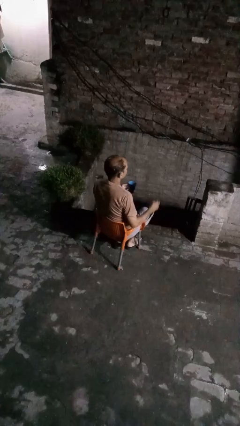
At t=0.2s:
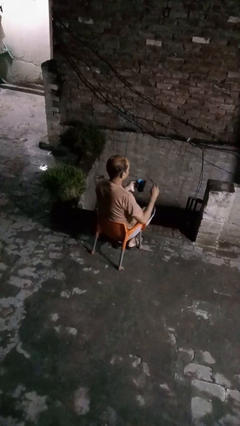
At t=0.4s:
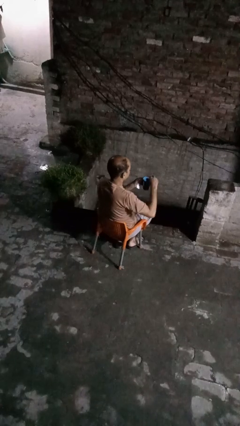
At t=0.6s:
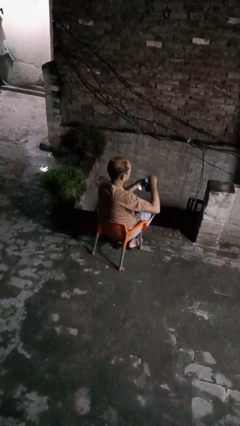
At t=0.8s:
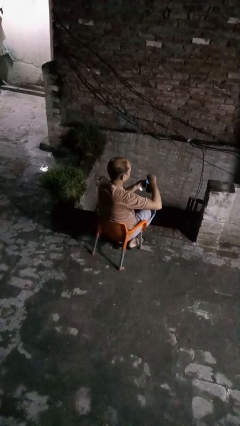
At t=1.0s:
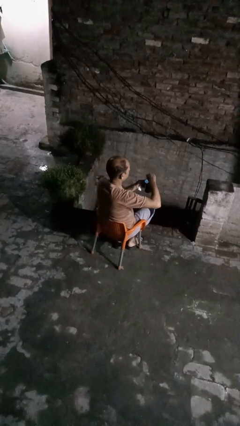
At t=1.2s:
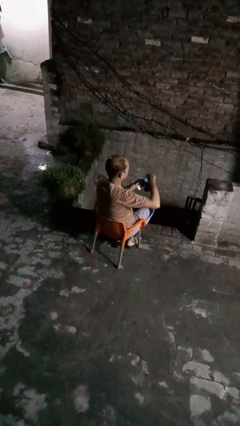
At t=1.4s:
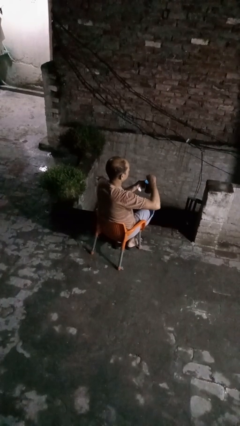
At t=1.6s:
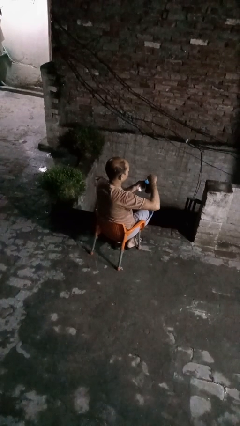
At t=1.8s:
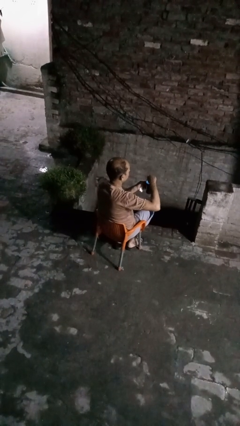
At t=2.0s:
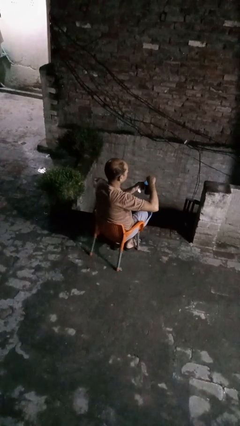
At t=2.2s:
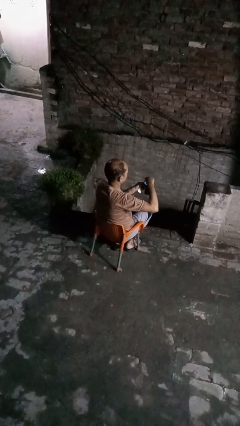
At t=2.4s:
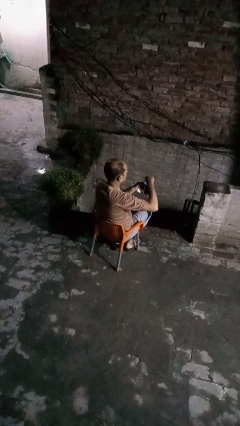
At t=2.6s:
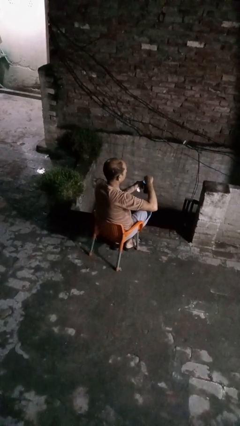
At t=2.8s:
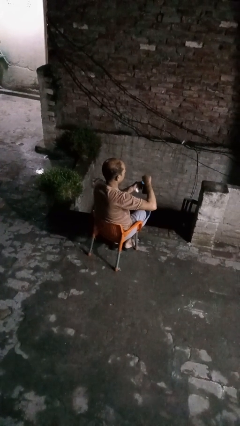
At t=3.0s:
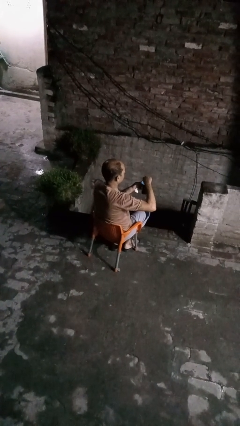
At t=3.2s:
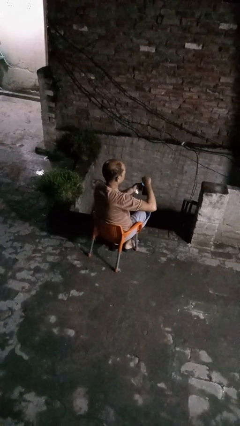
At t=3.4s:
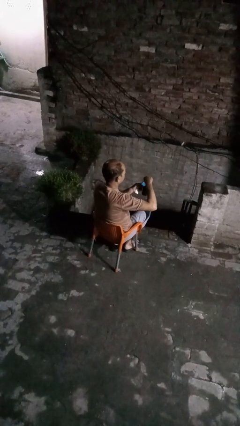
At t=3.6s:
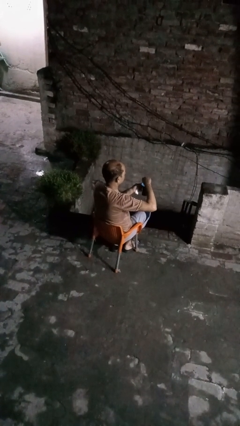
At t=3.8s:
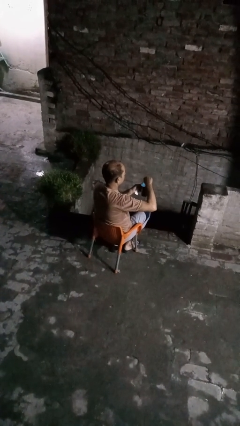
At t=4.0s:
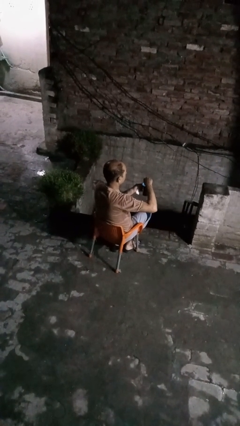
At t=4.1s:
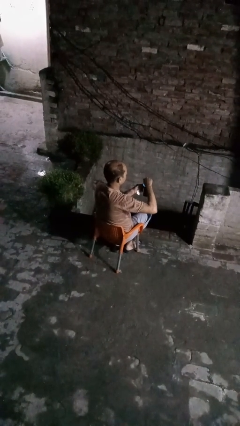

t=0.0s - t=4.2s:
person stirs mug

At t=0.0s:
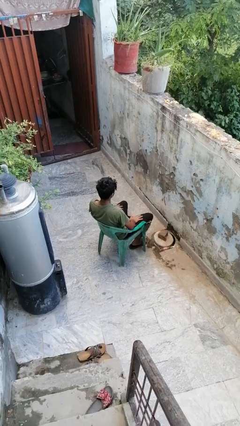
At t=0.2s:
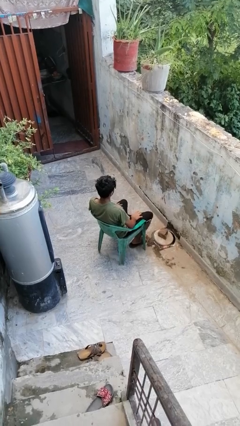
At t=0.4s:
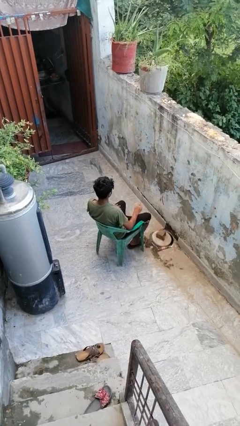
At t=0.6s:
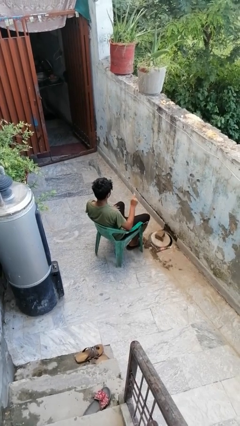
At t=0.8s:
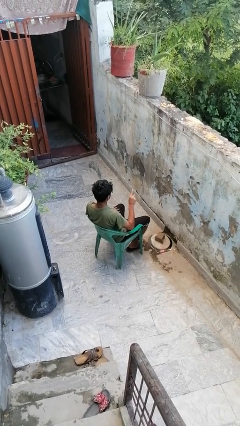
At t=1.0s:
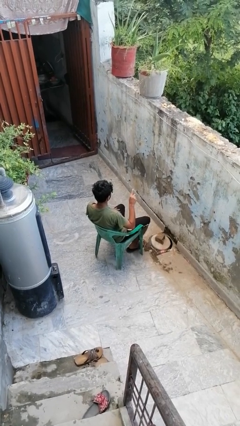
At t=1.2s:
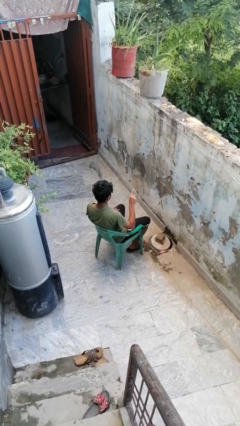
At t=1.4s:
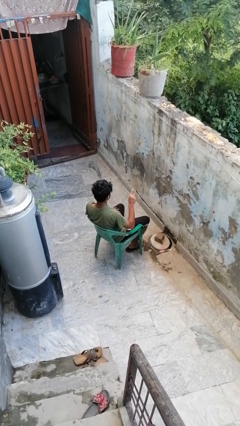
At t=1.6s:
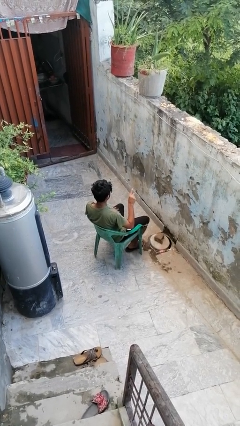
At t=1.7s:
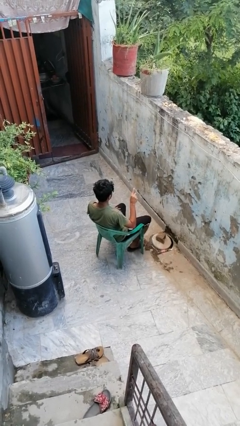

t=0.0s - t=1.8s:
person gestures number one

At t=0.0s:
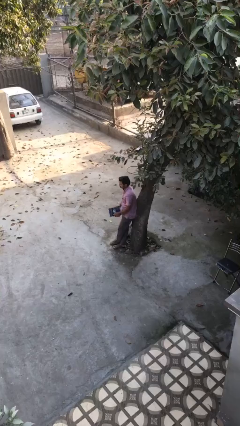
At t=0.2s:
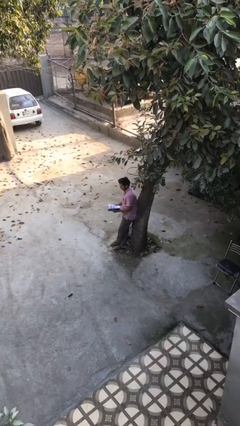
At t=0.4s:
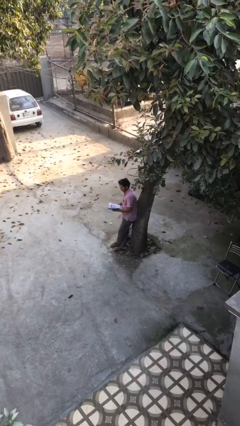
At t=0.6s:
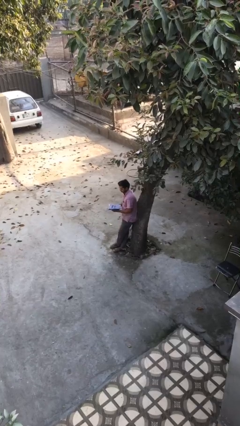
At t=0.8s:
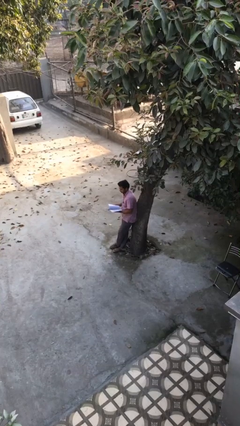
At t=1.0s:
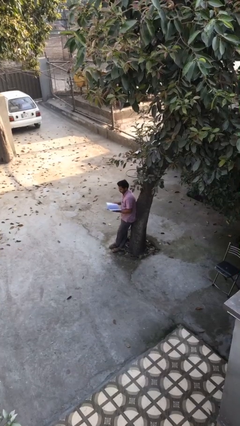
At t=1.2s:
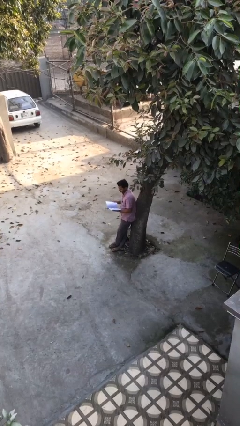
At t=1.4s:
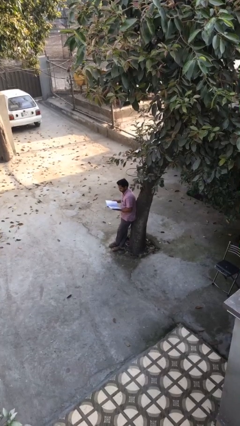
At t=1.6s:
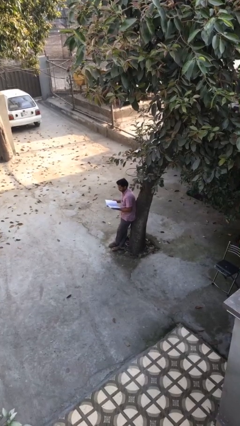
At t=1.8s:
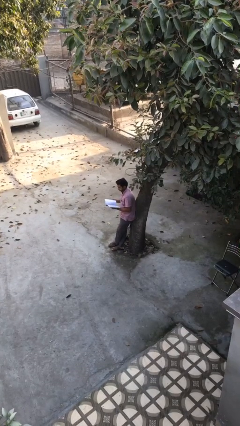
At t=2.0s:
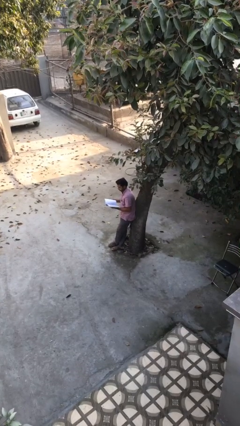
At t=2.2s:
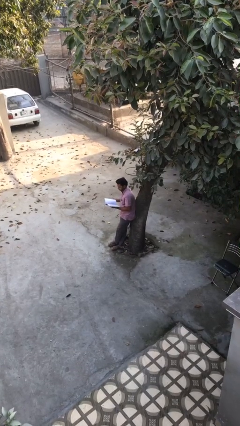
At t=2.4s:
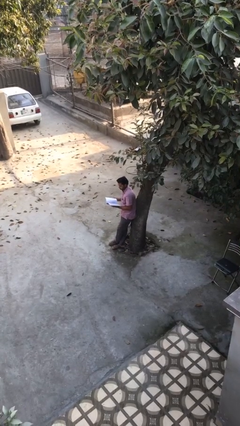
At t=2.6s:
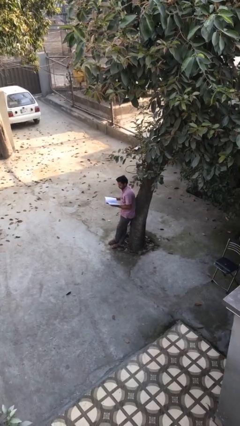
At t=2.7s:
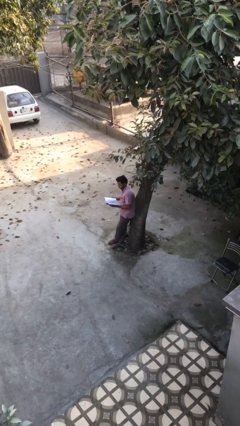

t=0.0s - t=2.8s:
person reads document

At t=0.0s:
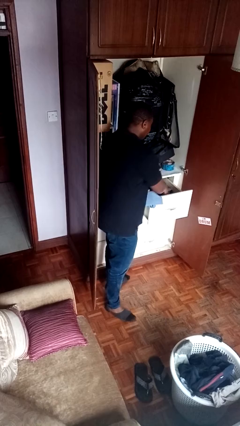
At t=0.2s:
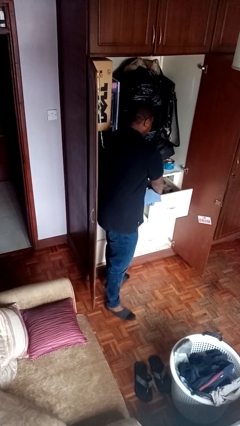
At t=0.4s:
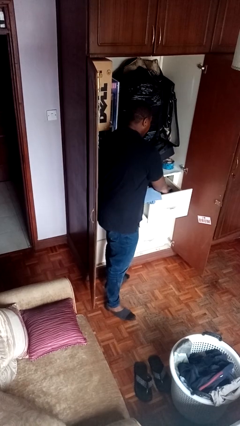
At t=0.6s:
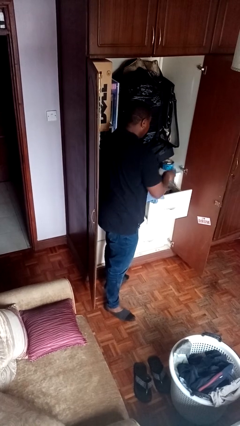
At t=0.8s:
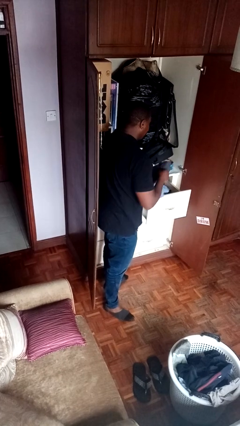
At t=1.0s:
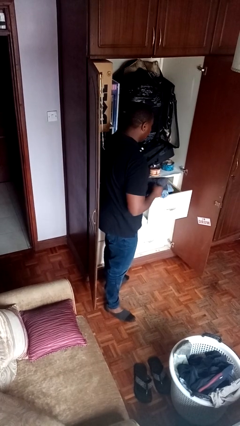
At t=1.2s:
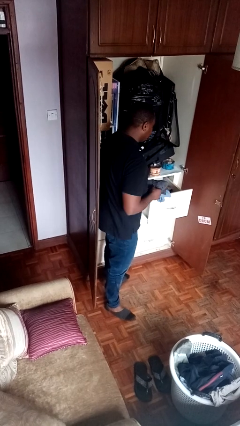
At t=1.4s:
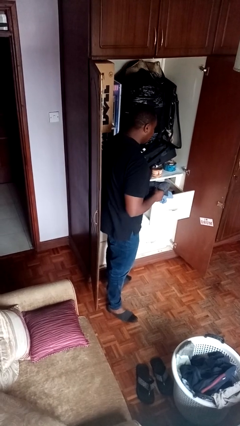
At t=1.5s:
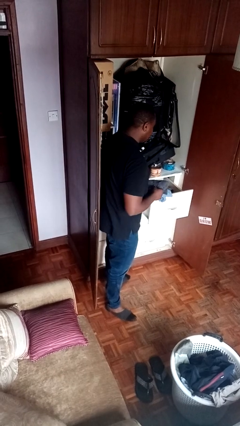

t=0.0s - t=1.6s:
person takes clothes from dresser

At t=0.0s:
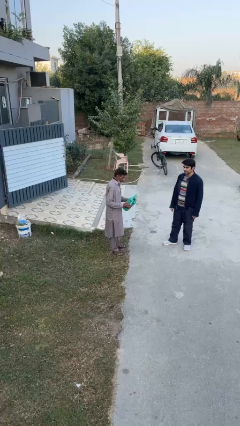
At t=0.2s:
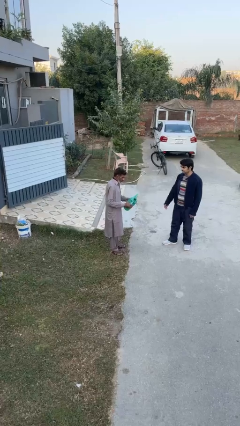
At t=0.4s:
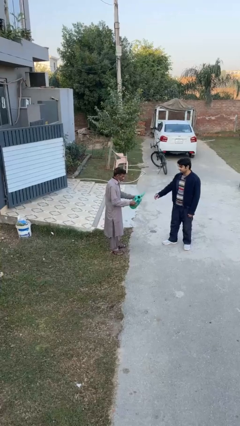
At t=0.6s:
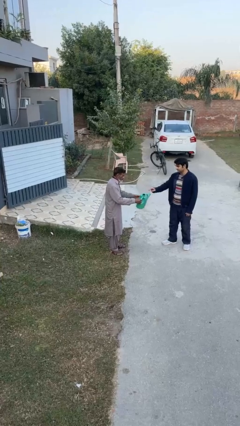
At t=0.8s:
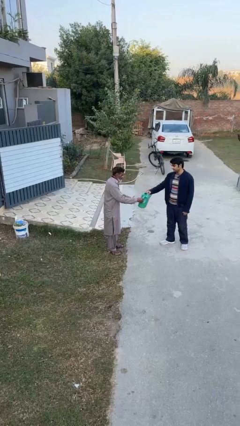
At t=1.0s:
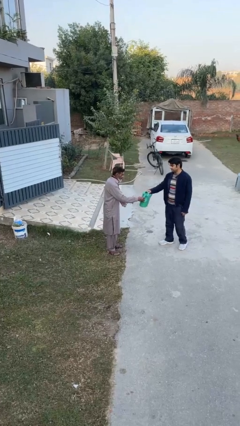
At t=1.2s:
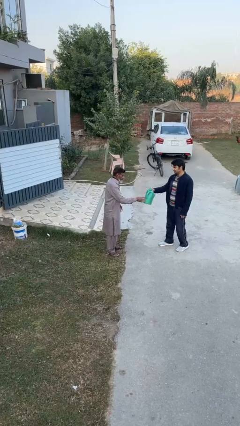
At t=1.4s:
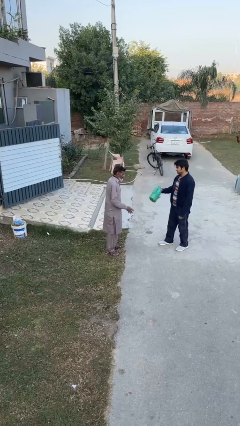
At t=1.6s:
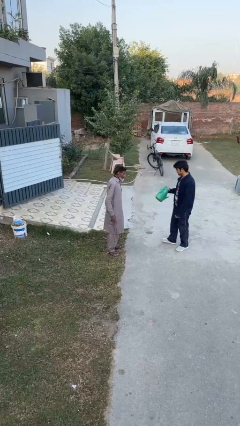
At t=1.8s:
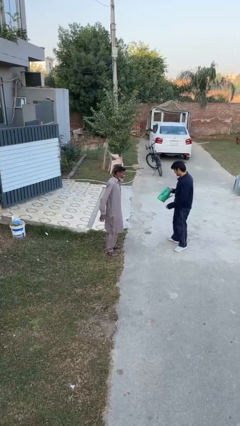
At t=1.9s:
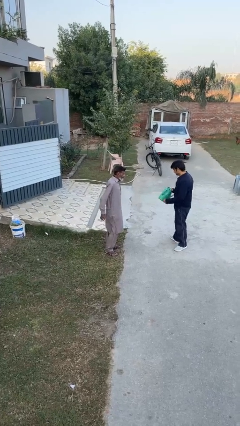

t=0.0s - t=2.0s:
person transfers object to person

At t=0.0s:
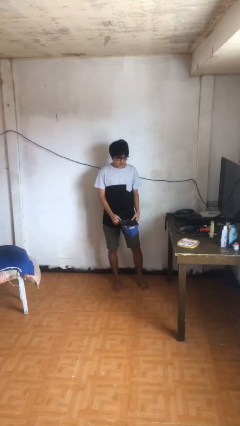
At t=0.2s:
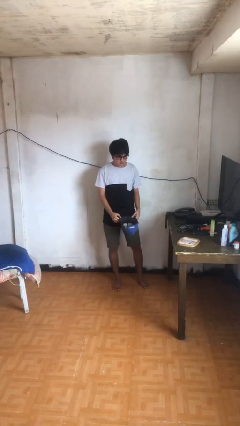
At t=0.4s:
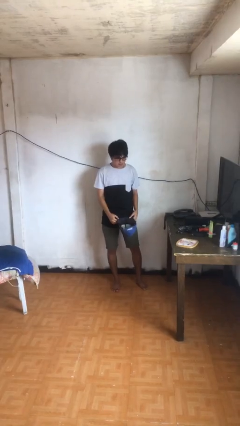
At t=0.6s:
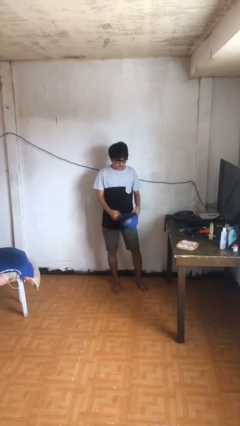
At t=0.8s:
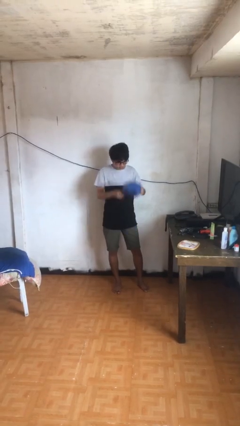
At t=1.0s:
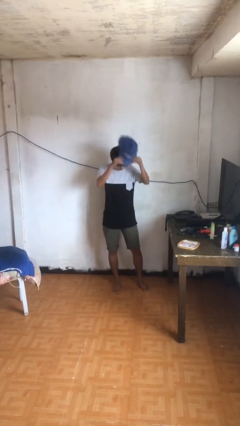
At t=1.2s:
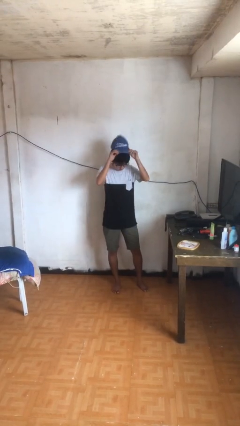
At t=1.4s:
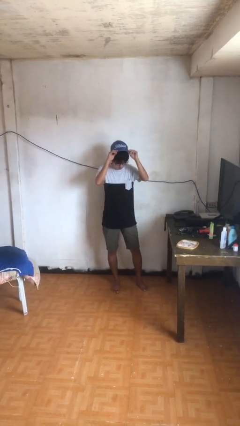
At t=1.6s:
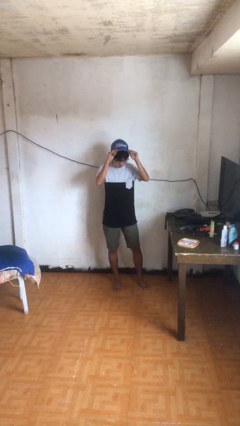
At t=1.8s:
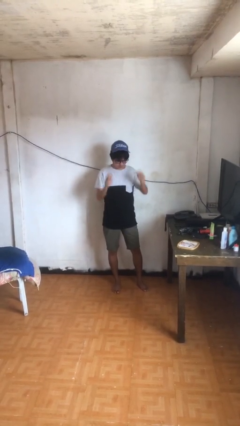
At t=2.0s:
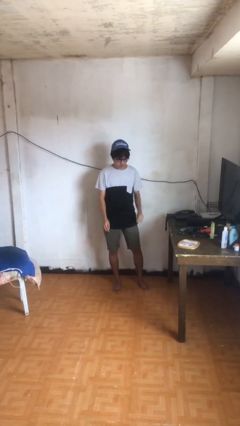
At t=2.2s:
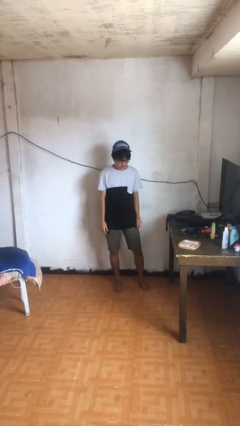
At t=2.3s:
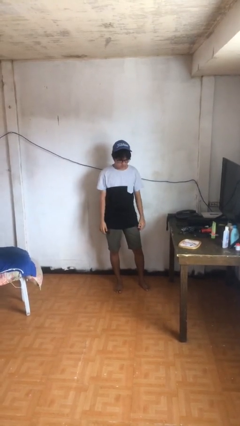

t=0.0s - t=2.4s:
person puts on hat

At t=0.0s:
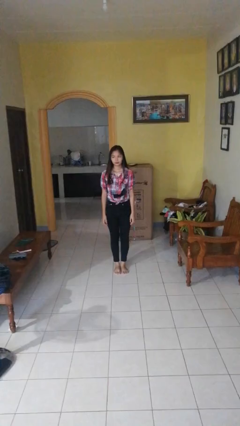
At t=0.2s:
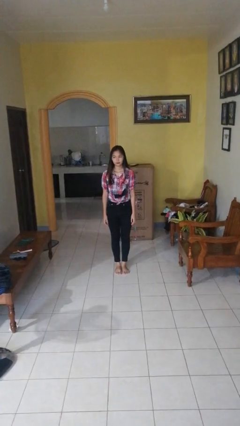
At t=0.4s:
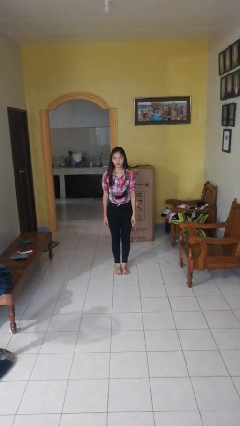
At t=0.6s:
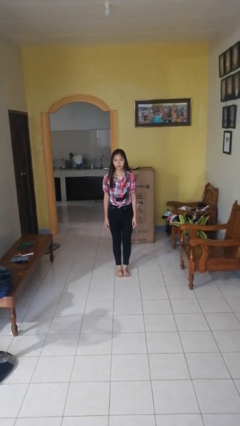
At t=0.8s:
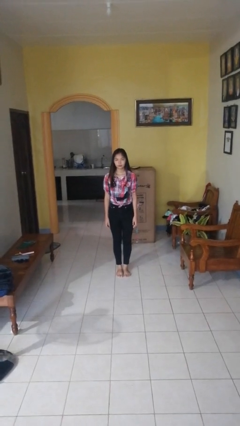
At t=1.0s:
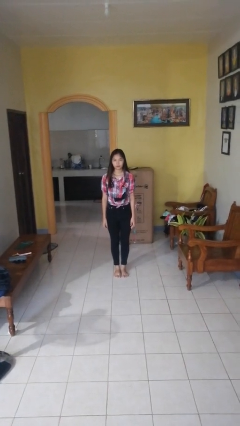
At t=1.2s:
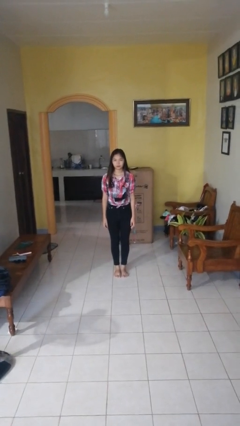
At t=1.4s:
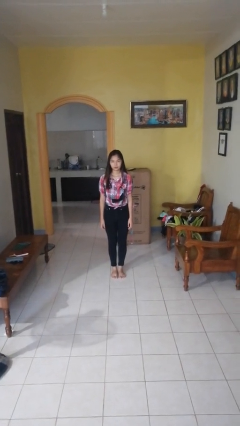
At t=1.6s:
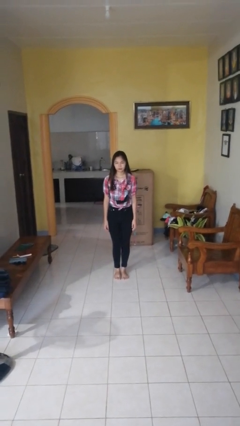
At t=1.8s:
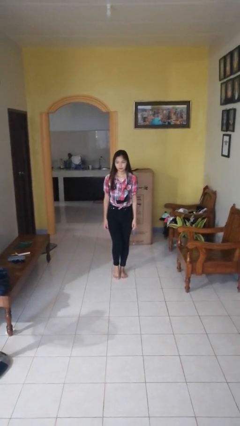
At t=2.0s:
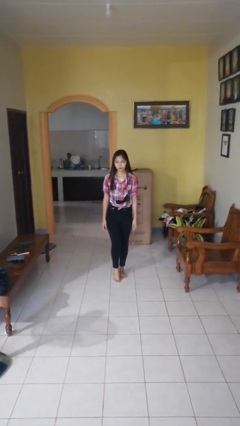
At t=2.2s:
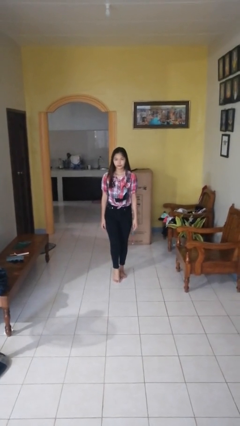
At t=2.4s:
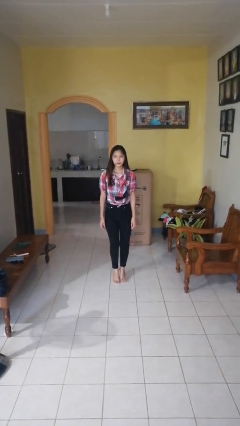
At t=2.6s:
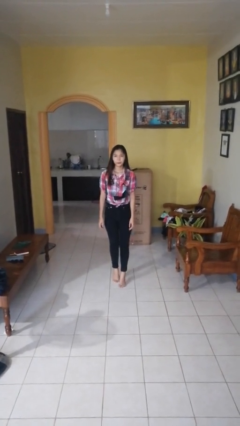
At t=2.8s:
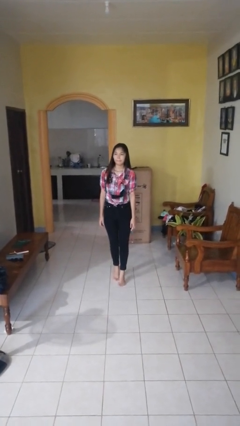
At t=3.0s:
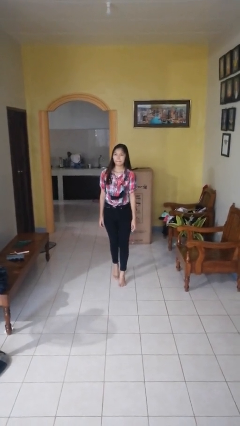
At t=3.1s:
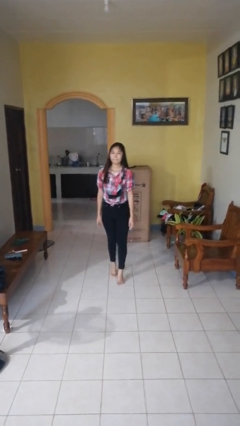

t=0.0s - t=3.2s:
person walks tiptoe
